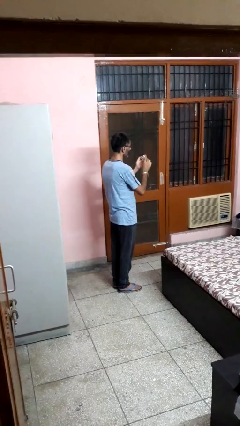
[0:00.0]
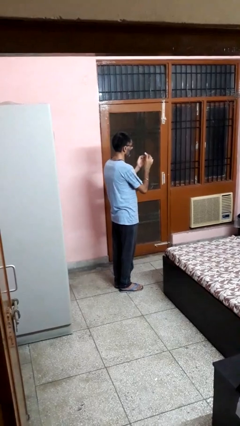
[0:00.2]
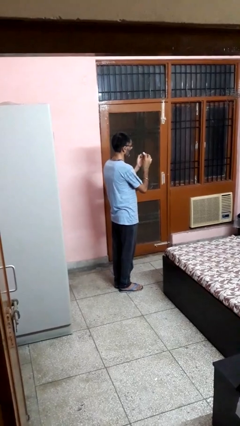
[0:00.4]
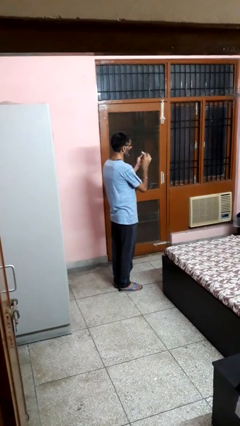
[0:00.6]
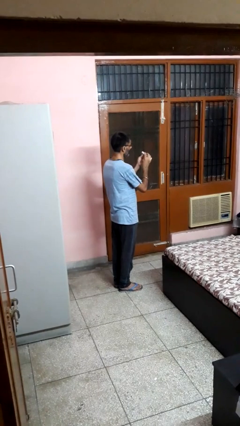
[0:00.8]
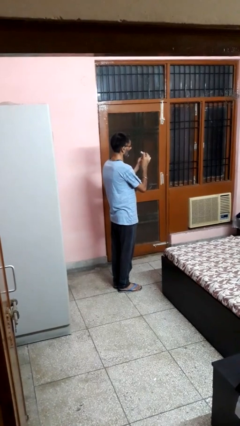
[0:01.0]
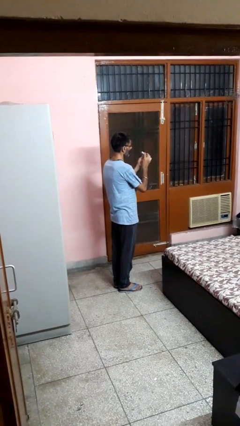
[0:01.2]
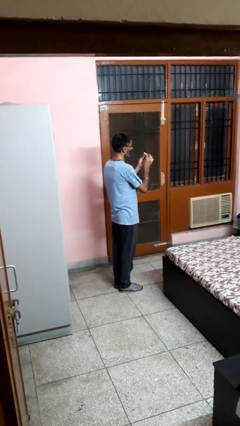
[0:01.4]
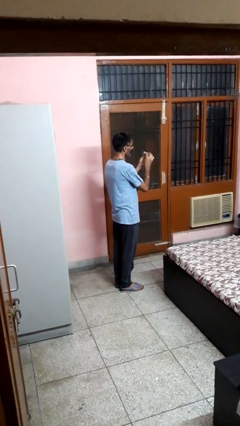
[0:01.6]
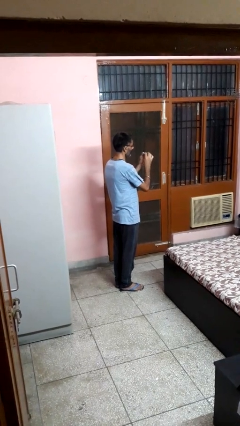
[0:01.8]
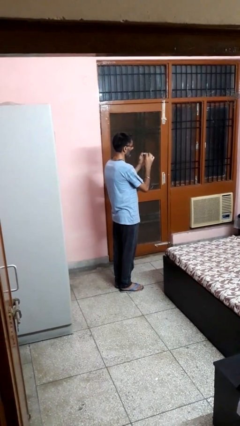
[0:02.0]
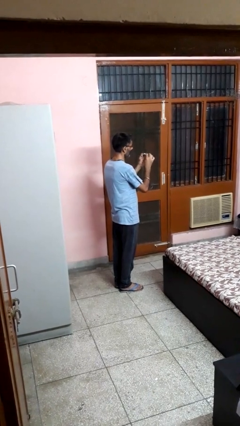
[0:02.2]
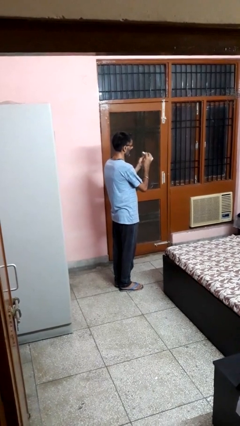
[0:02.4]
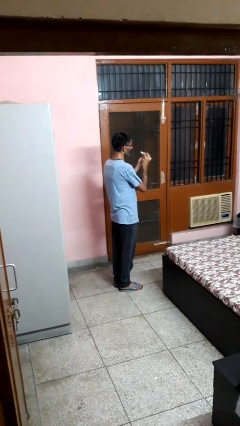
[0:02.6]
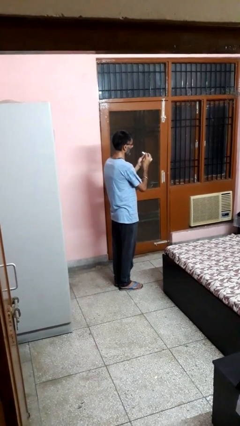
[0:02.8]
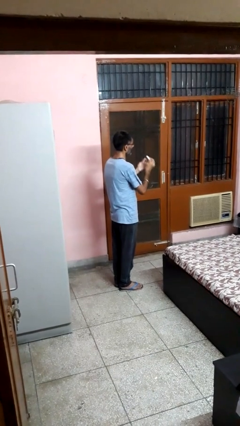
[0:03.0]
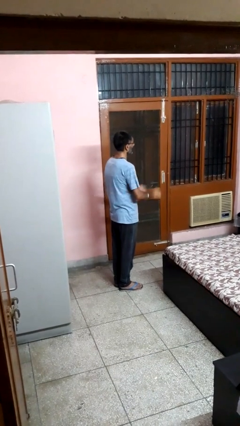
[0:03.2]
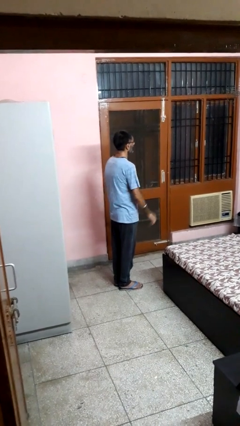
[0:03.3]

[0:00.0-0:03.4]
person files fingernails

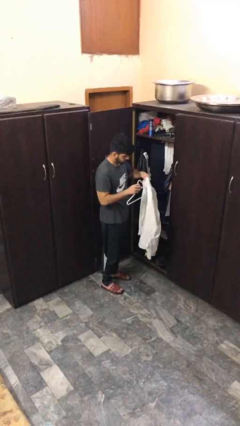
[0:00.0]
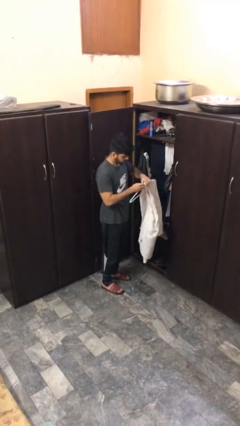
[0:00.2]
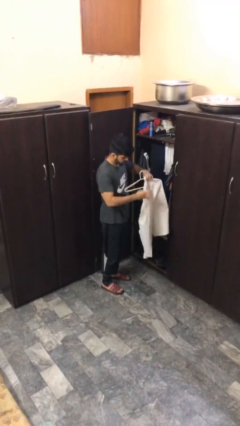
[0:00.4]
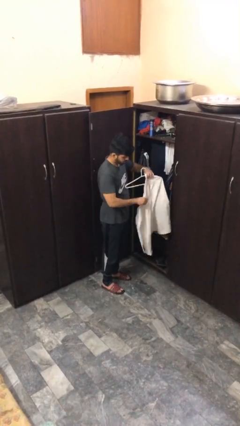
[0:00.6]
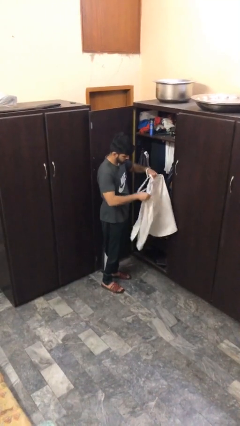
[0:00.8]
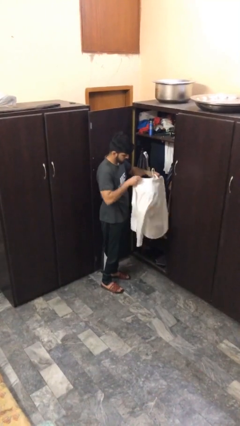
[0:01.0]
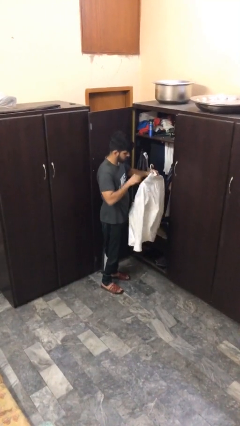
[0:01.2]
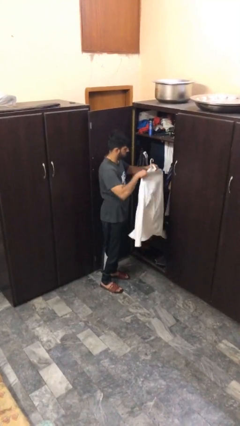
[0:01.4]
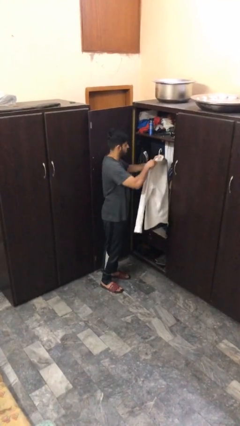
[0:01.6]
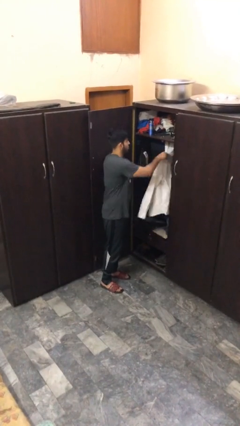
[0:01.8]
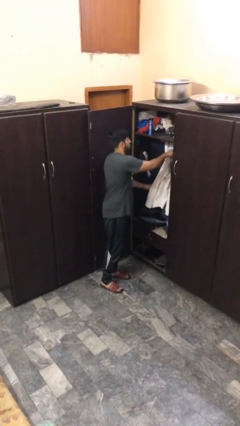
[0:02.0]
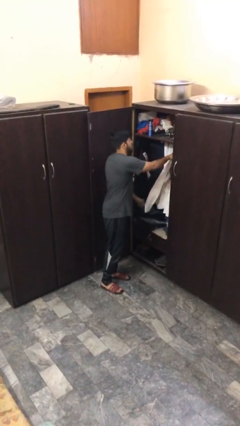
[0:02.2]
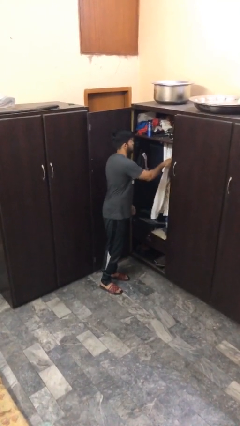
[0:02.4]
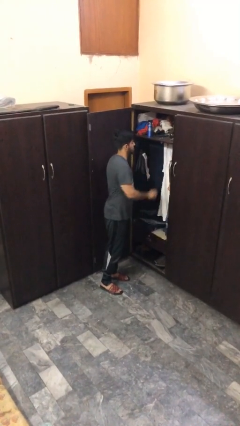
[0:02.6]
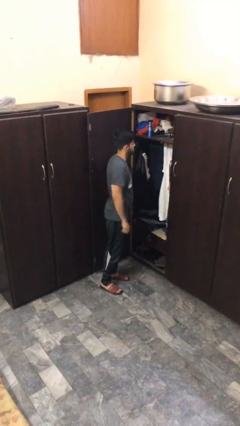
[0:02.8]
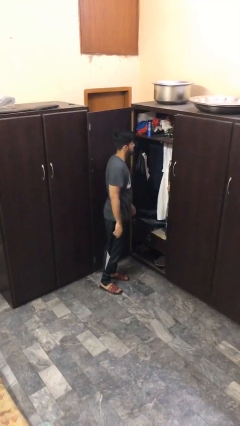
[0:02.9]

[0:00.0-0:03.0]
person puts clothes into closet

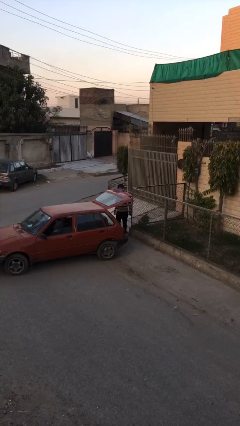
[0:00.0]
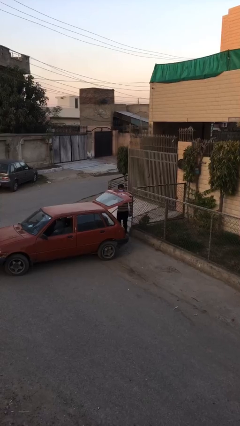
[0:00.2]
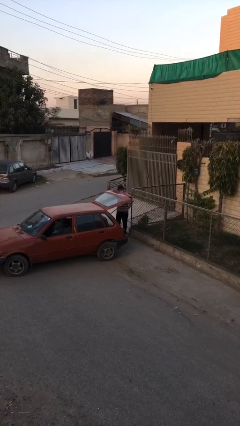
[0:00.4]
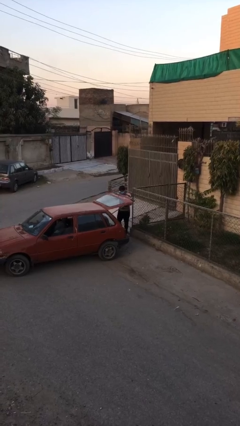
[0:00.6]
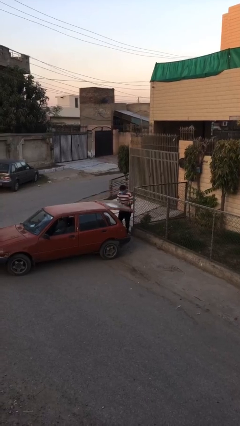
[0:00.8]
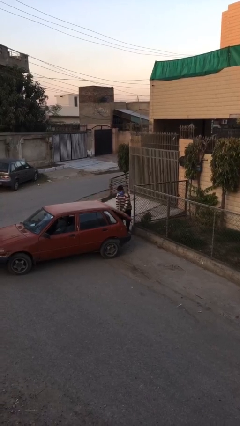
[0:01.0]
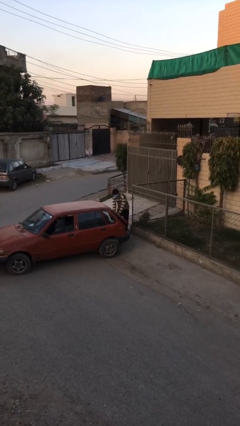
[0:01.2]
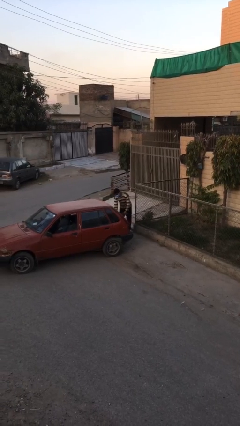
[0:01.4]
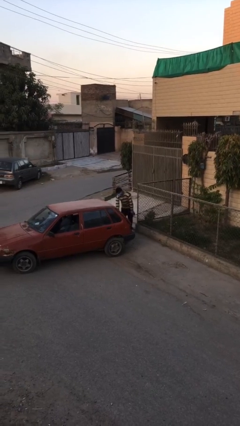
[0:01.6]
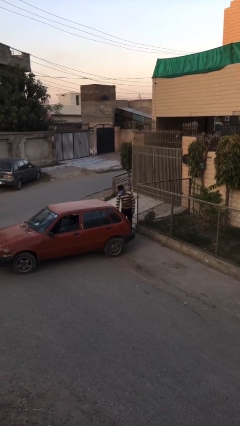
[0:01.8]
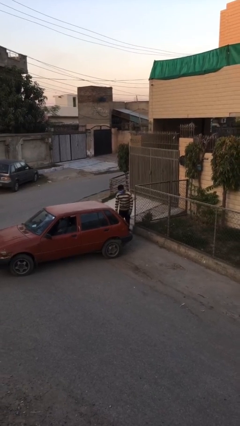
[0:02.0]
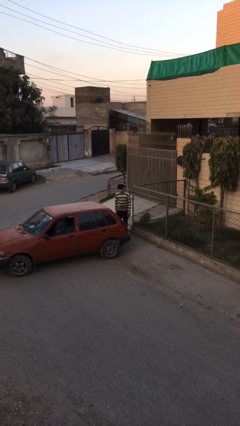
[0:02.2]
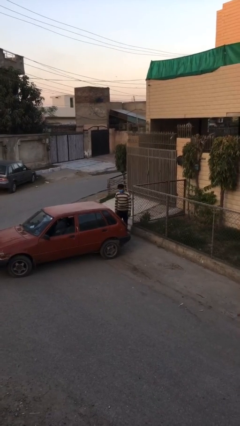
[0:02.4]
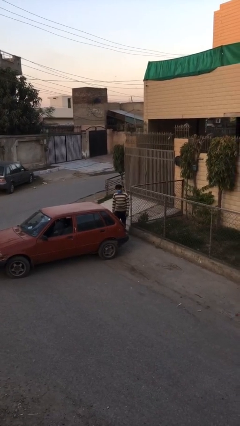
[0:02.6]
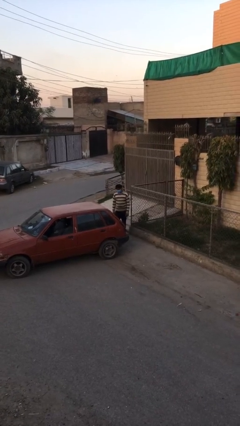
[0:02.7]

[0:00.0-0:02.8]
person closes car trunk

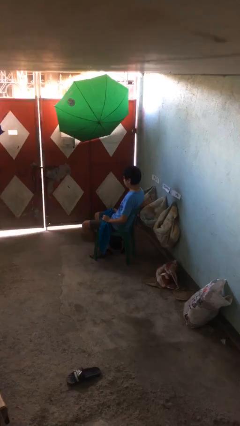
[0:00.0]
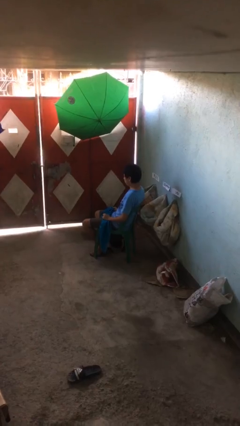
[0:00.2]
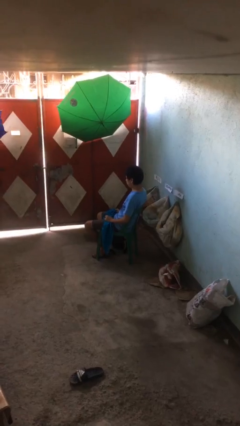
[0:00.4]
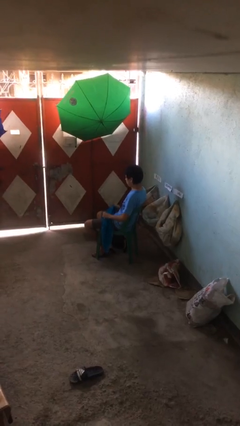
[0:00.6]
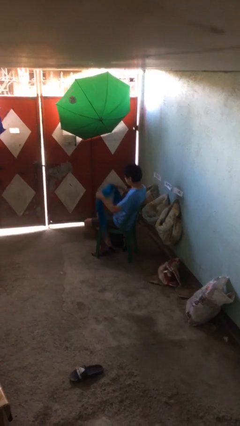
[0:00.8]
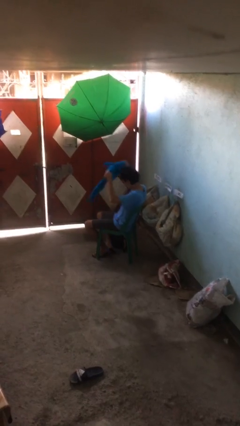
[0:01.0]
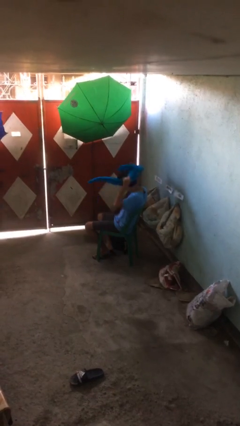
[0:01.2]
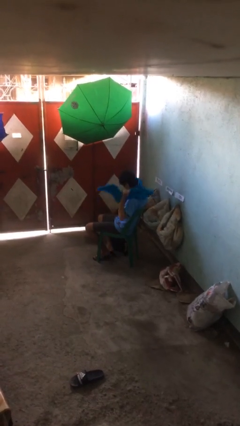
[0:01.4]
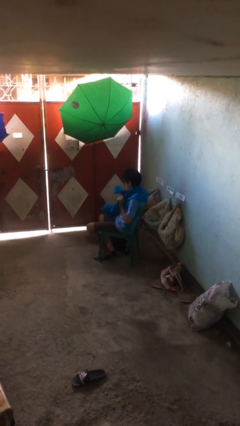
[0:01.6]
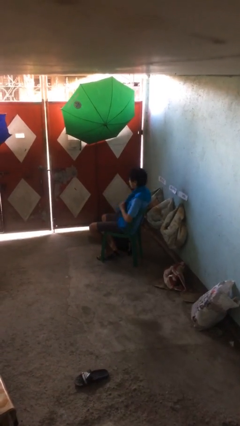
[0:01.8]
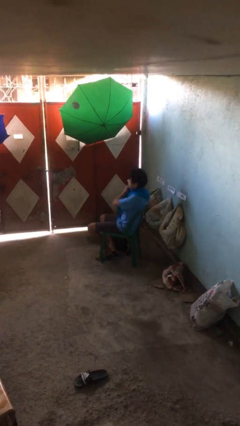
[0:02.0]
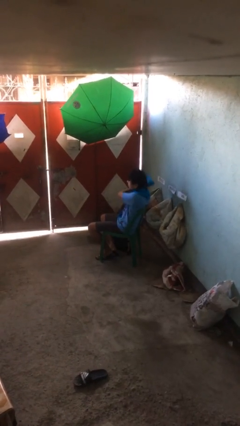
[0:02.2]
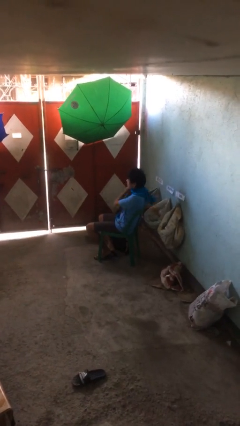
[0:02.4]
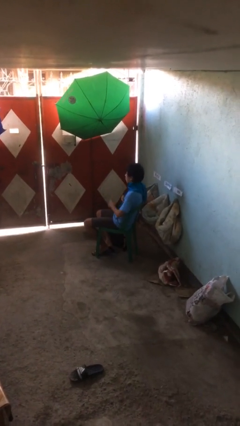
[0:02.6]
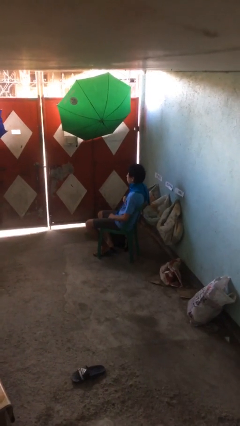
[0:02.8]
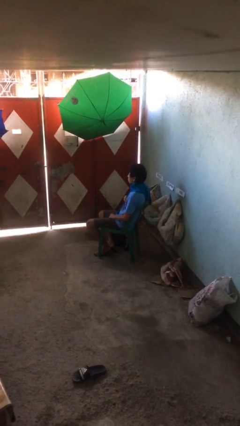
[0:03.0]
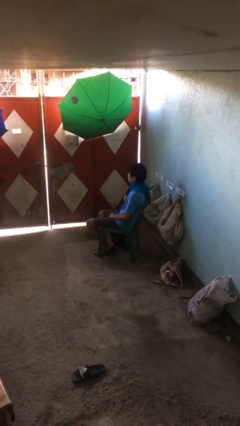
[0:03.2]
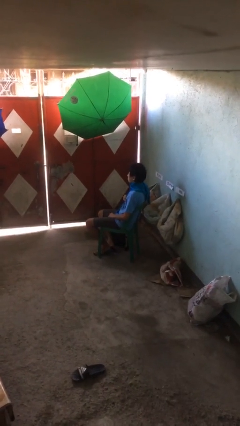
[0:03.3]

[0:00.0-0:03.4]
person puts on scarf

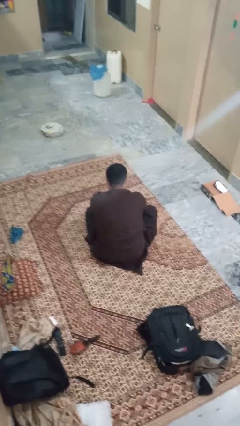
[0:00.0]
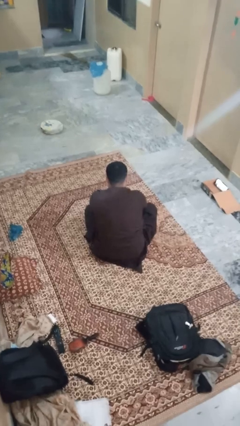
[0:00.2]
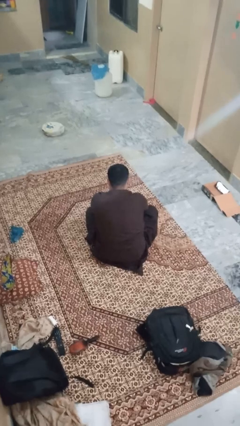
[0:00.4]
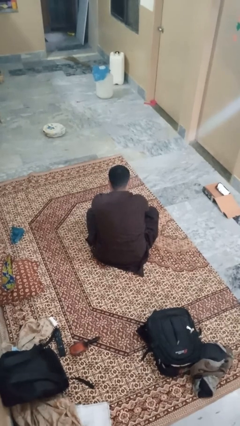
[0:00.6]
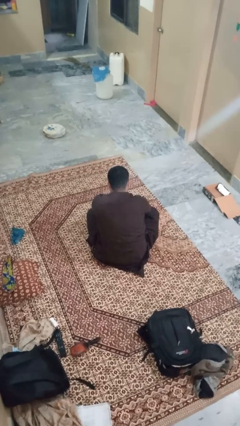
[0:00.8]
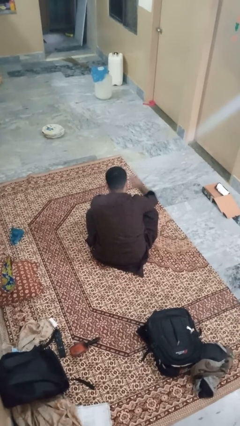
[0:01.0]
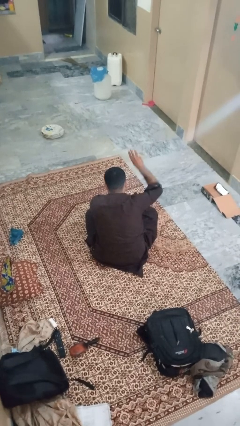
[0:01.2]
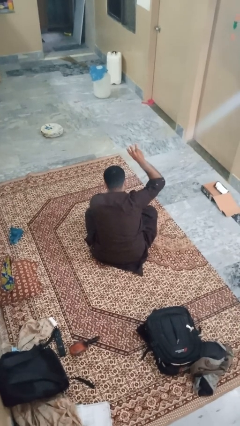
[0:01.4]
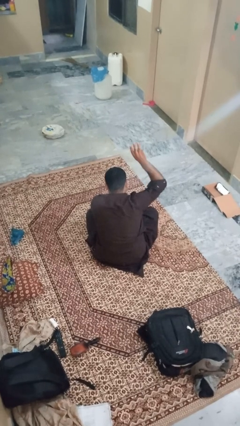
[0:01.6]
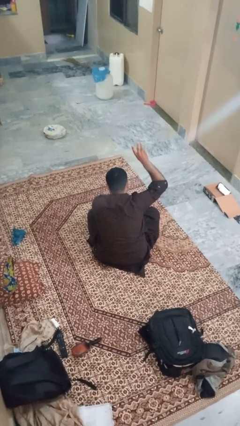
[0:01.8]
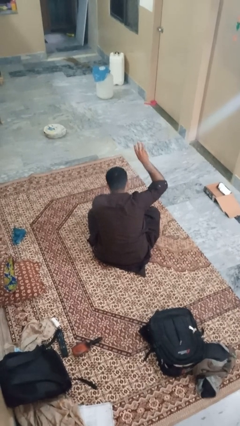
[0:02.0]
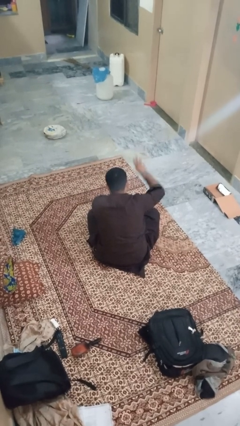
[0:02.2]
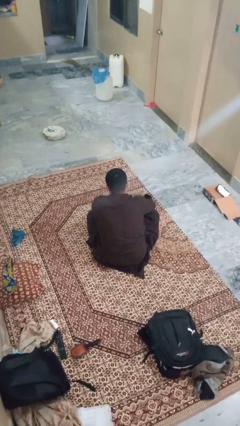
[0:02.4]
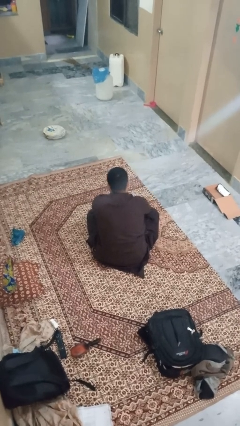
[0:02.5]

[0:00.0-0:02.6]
person gestures number three

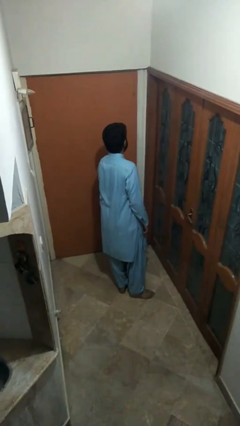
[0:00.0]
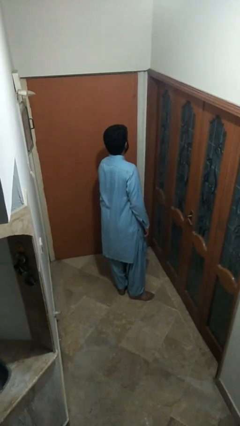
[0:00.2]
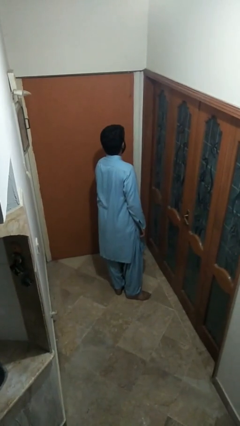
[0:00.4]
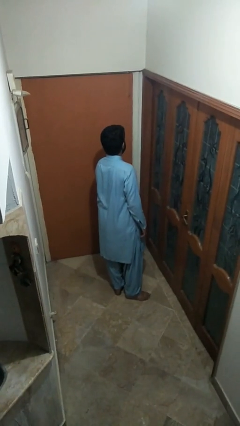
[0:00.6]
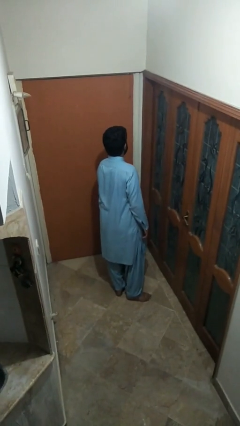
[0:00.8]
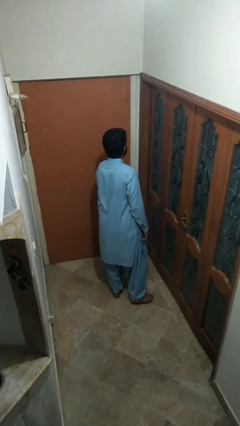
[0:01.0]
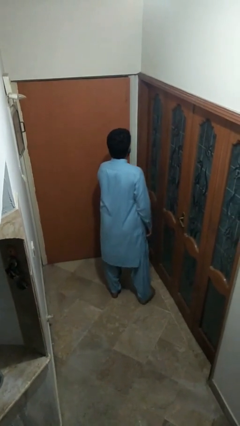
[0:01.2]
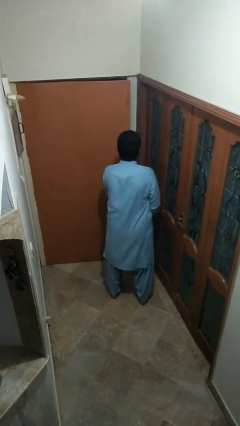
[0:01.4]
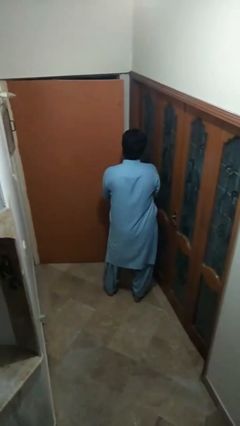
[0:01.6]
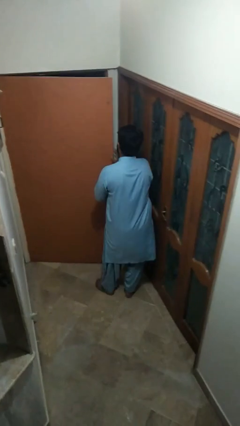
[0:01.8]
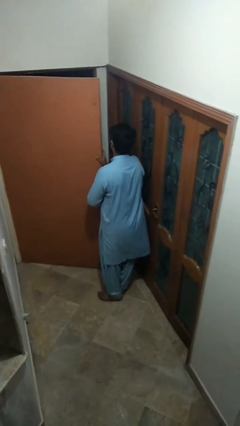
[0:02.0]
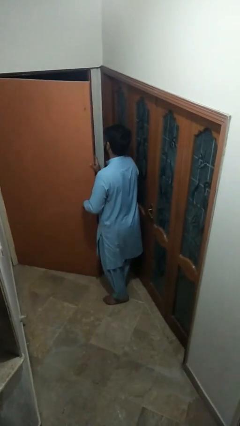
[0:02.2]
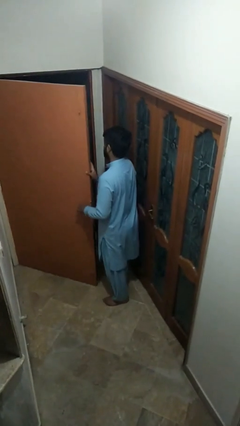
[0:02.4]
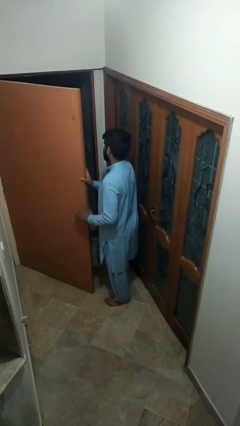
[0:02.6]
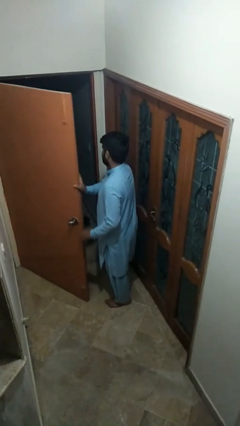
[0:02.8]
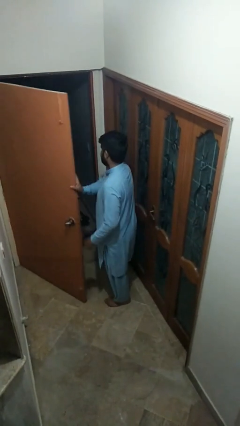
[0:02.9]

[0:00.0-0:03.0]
person opens facility door
